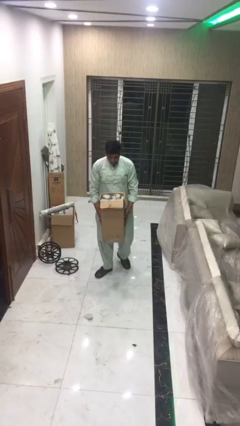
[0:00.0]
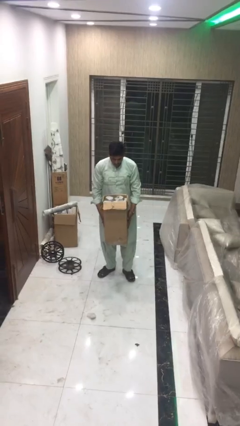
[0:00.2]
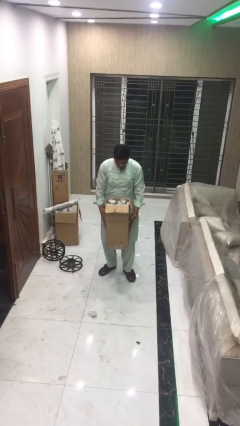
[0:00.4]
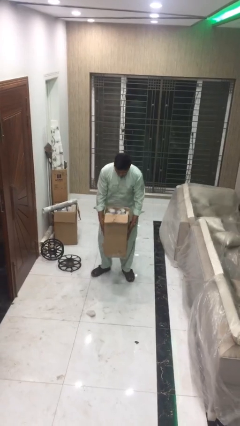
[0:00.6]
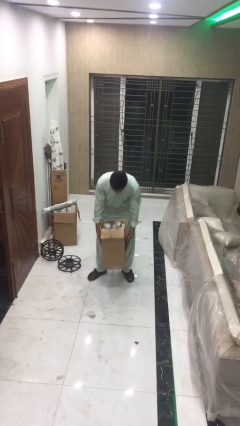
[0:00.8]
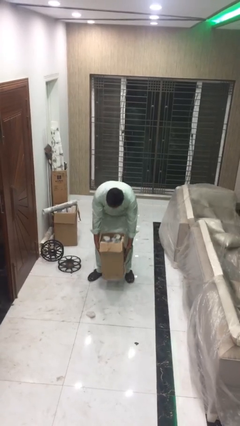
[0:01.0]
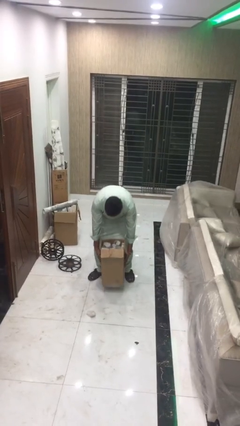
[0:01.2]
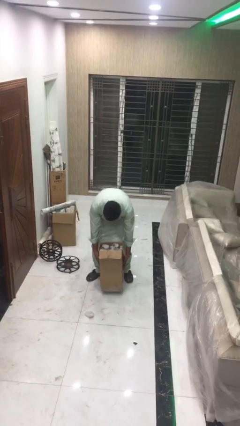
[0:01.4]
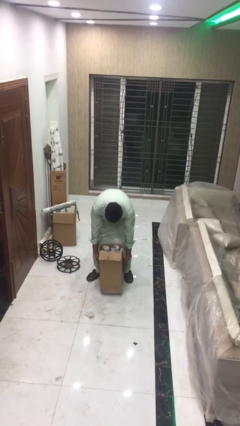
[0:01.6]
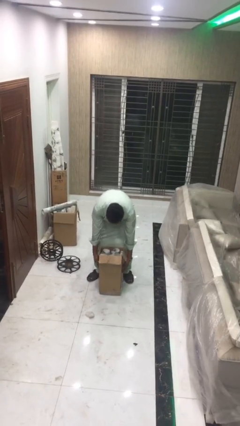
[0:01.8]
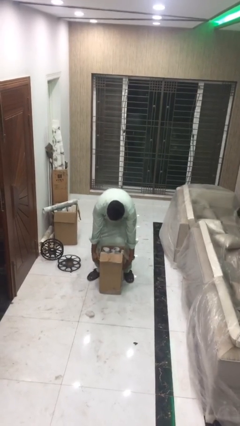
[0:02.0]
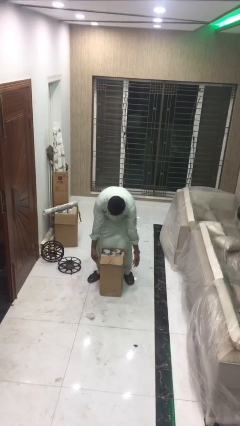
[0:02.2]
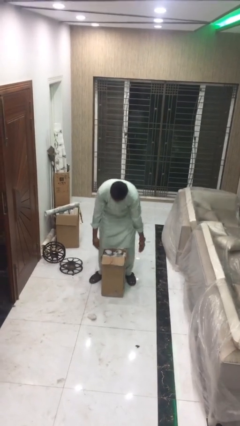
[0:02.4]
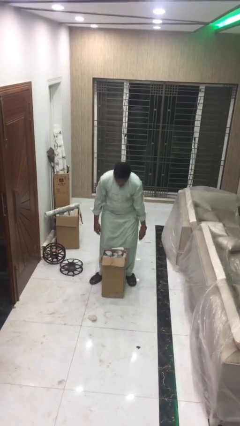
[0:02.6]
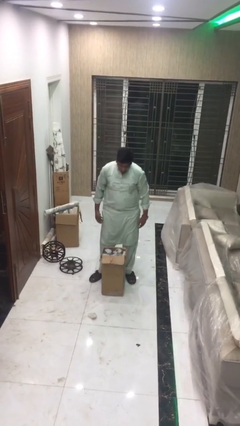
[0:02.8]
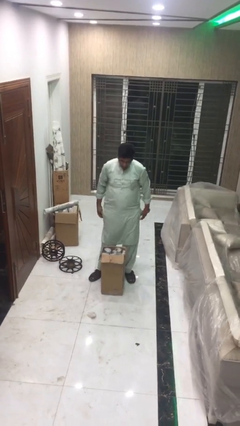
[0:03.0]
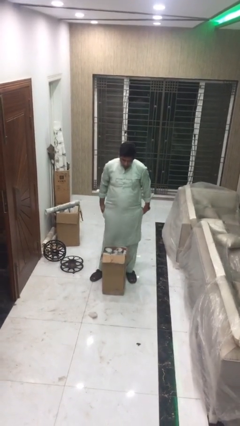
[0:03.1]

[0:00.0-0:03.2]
person puts down object on floor

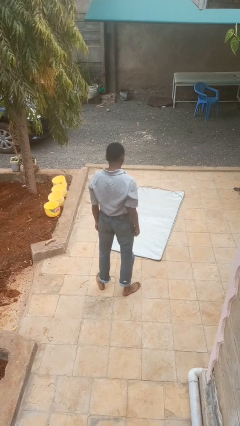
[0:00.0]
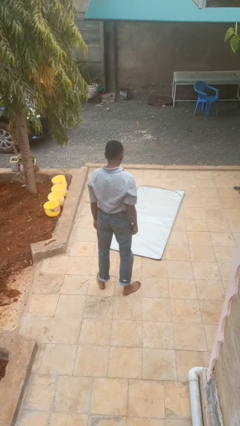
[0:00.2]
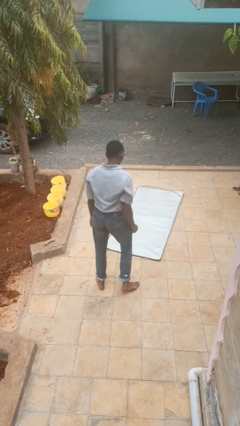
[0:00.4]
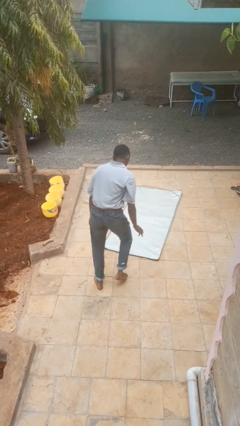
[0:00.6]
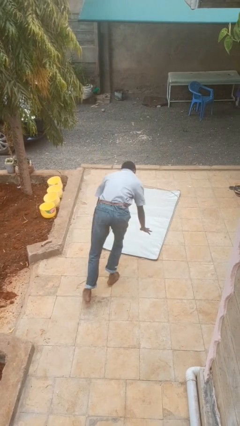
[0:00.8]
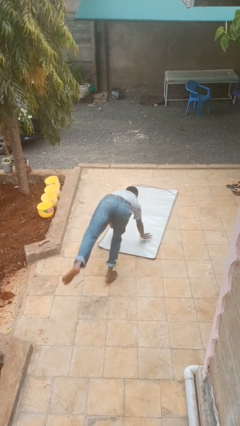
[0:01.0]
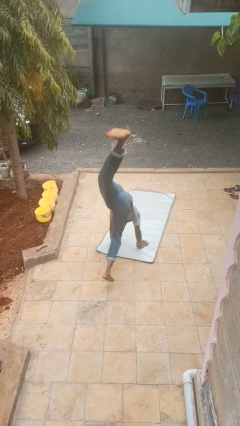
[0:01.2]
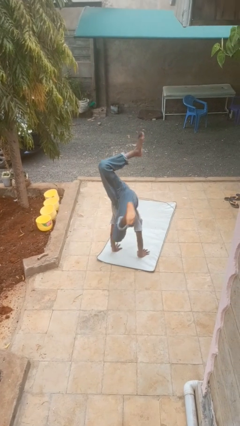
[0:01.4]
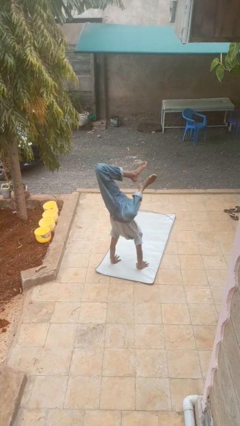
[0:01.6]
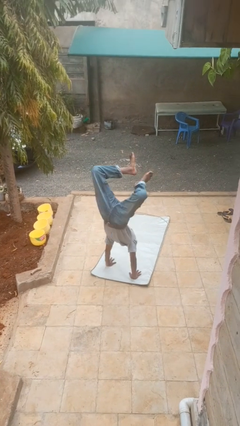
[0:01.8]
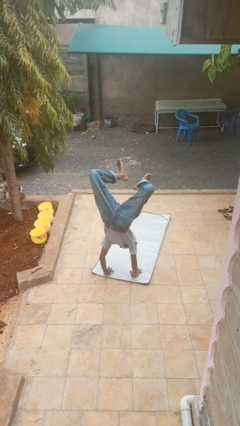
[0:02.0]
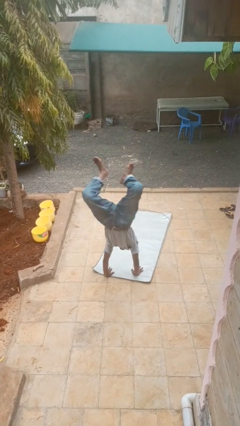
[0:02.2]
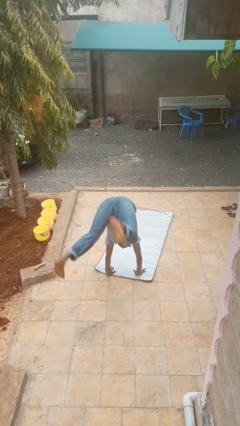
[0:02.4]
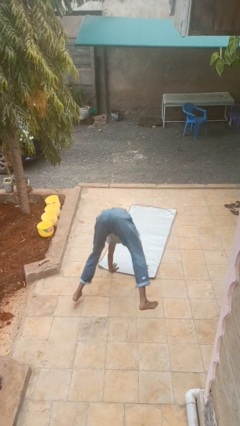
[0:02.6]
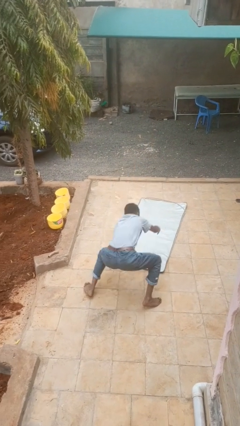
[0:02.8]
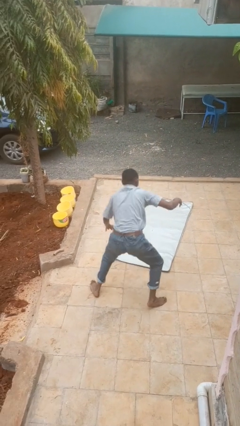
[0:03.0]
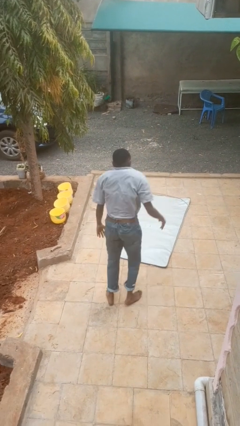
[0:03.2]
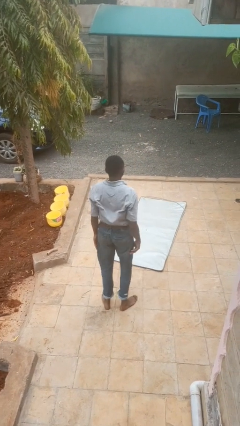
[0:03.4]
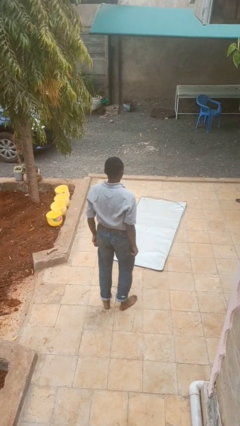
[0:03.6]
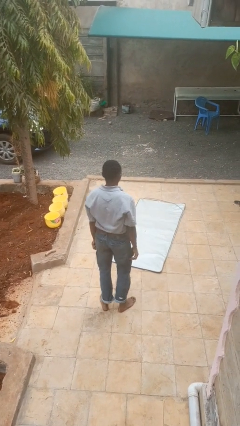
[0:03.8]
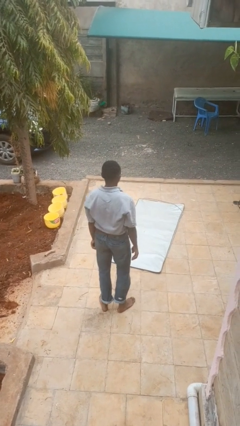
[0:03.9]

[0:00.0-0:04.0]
person handstand

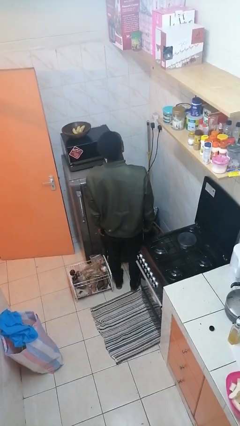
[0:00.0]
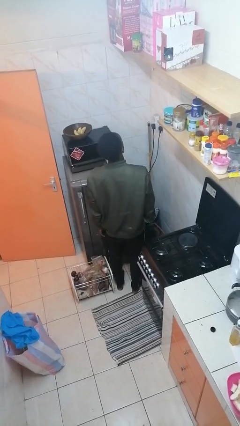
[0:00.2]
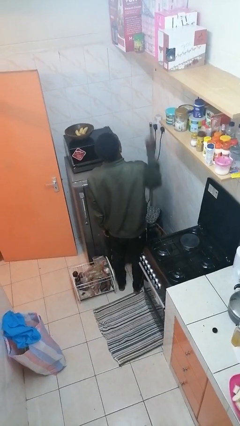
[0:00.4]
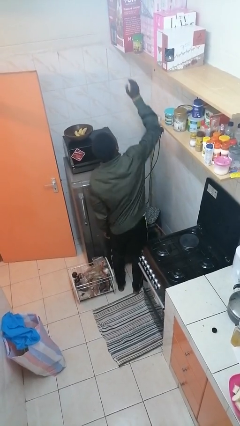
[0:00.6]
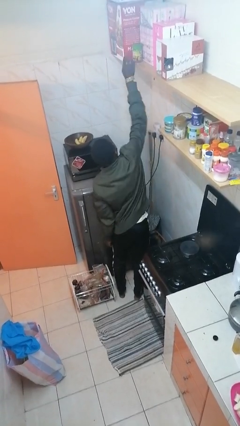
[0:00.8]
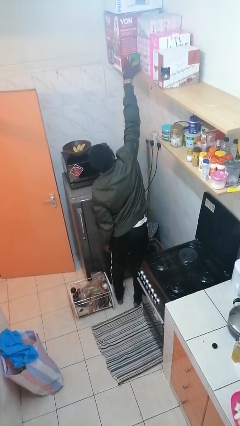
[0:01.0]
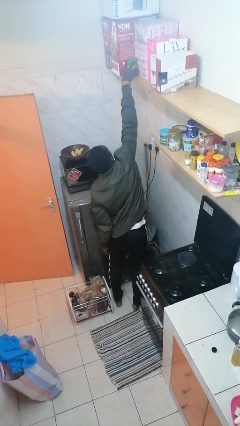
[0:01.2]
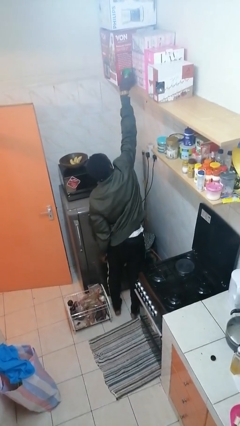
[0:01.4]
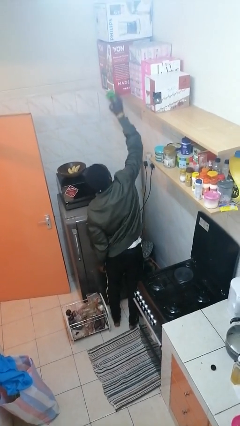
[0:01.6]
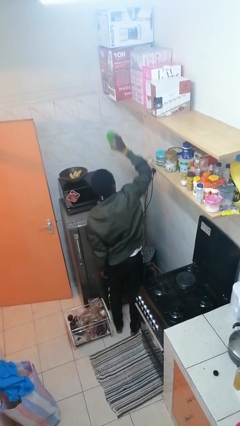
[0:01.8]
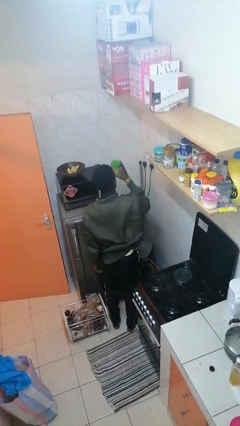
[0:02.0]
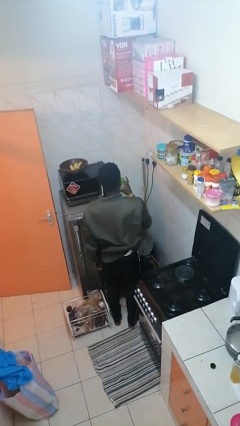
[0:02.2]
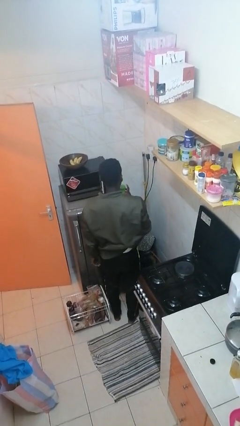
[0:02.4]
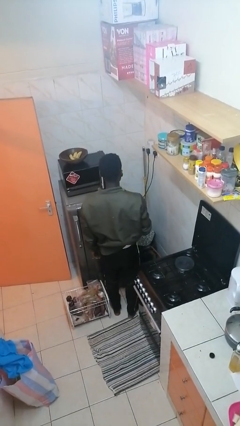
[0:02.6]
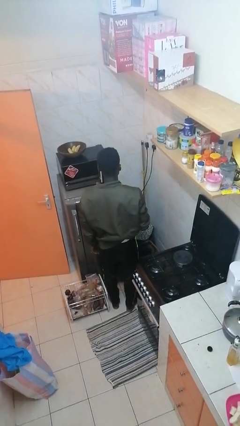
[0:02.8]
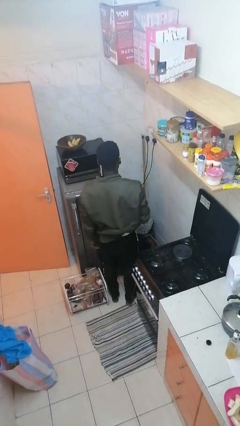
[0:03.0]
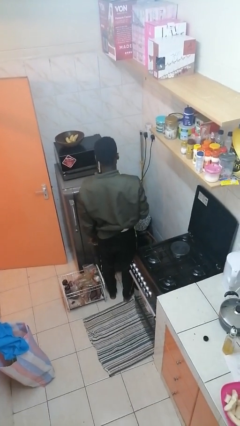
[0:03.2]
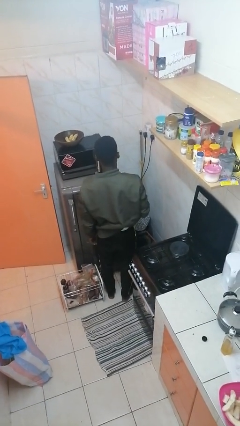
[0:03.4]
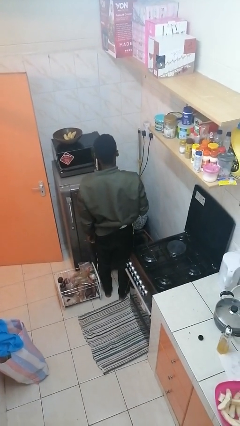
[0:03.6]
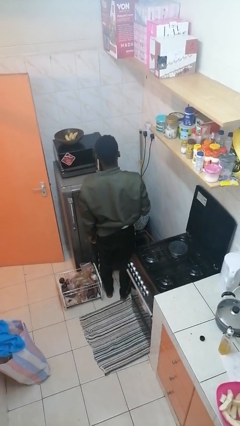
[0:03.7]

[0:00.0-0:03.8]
person picks up object from shelf

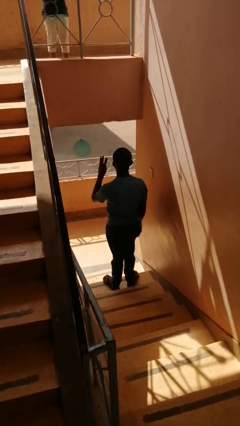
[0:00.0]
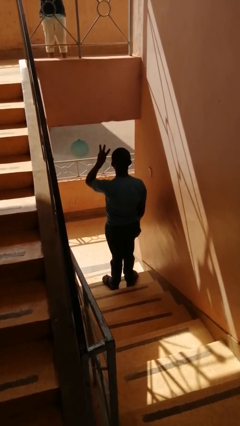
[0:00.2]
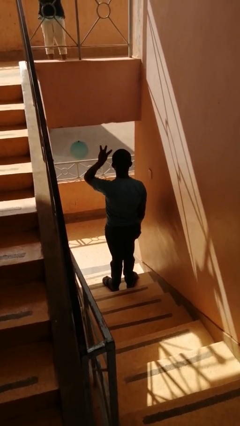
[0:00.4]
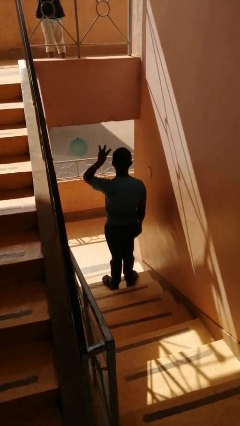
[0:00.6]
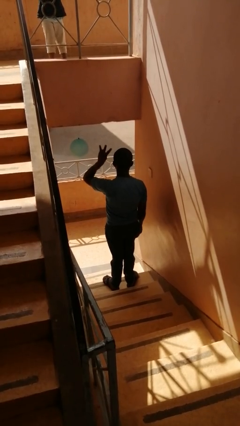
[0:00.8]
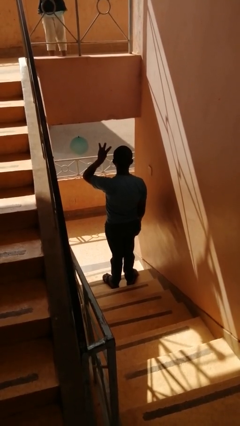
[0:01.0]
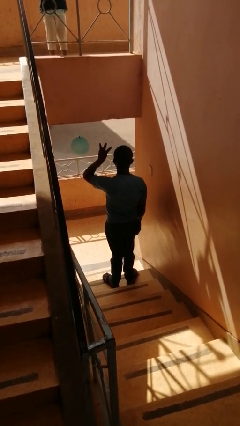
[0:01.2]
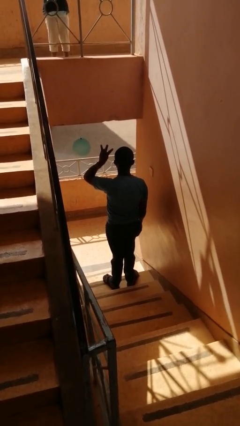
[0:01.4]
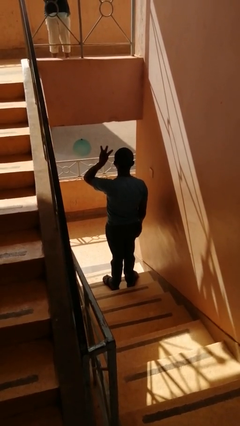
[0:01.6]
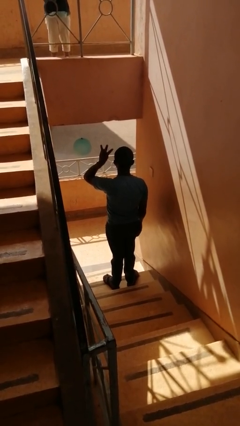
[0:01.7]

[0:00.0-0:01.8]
person gestures number three

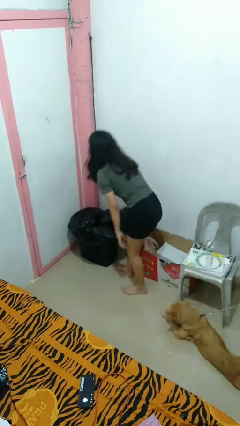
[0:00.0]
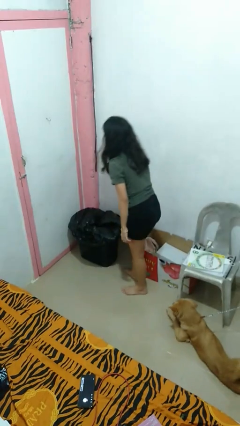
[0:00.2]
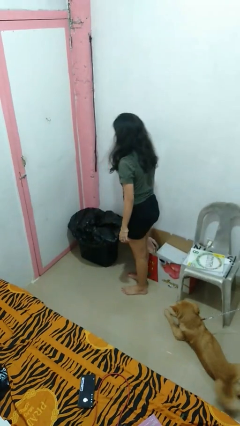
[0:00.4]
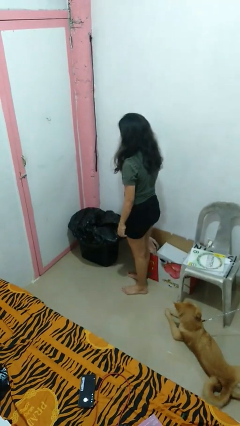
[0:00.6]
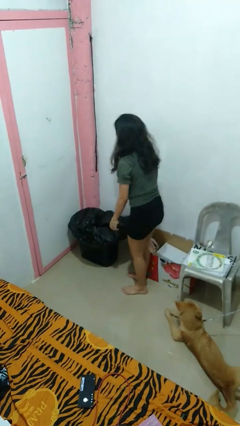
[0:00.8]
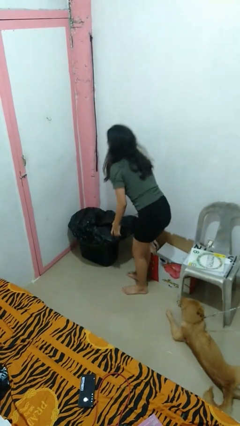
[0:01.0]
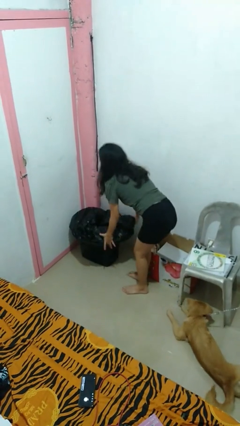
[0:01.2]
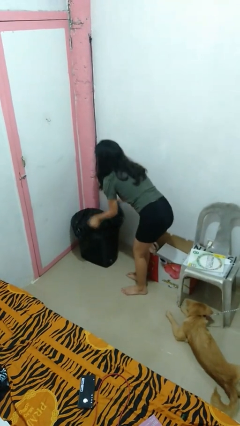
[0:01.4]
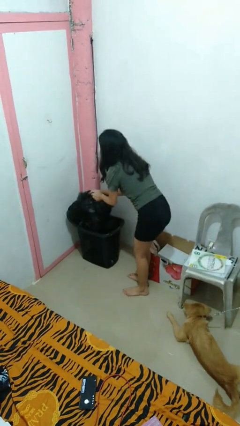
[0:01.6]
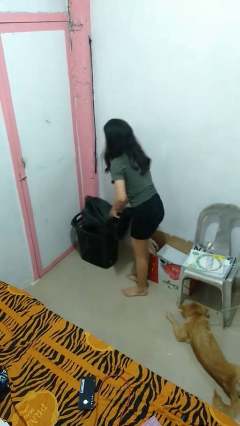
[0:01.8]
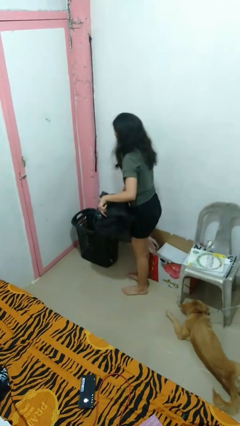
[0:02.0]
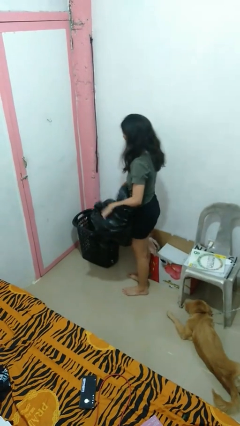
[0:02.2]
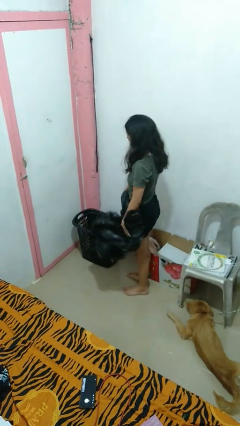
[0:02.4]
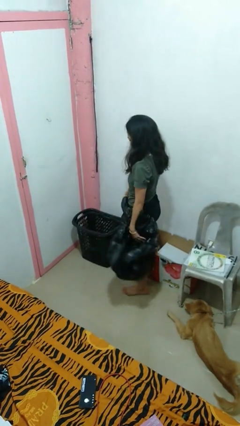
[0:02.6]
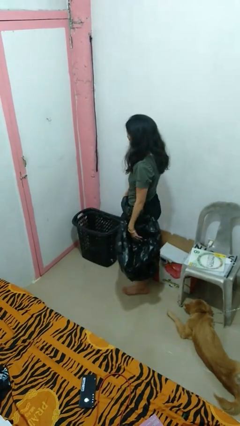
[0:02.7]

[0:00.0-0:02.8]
person removes trashbag from trashcan

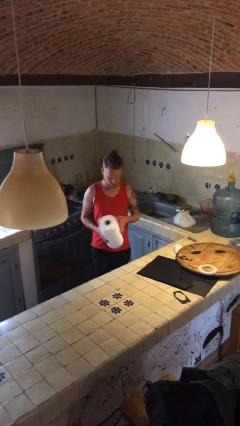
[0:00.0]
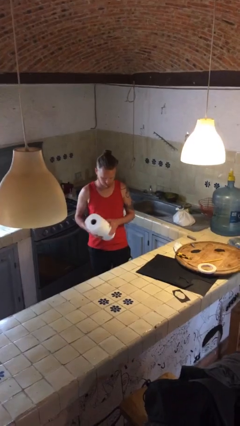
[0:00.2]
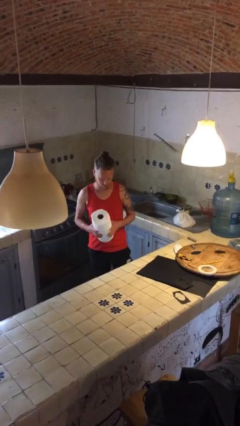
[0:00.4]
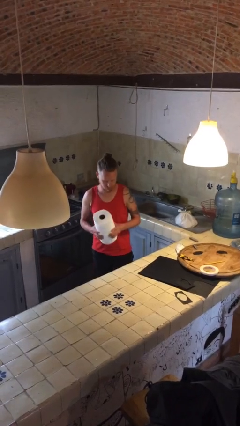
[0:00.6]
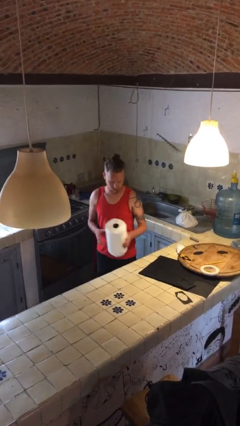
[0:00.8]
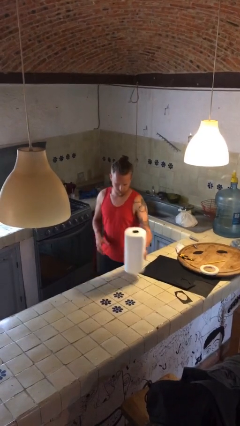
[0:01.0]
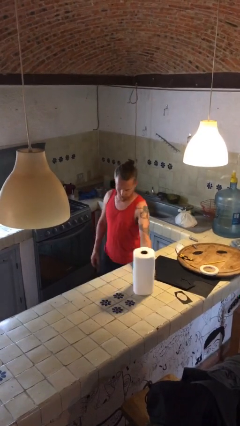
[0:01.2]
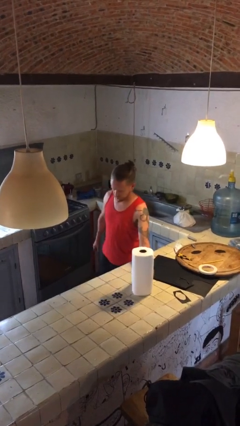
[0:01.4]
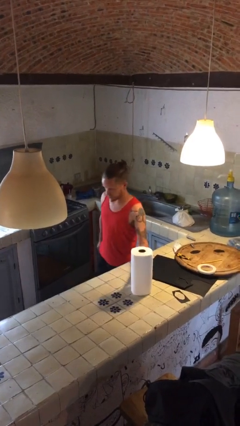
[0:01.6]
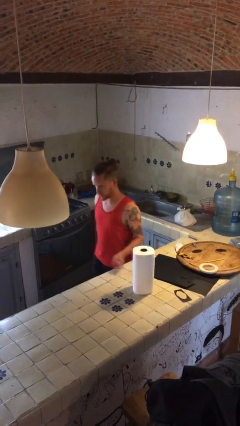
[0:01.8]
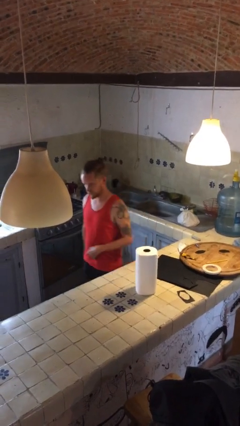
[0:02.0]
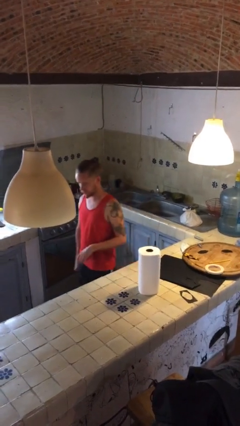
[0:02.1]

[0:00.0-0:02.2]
person puts down object on countertop
